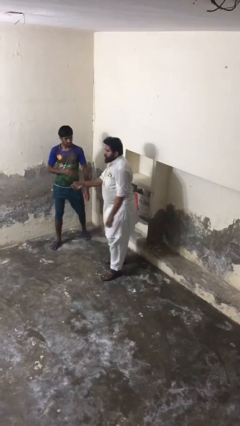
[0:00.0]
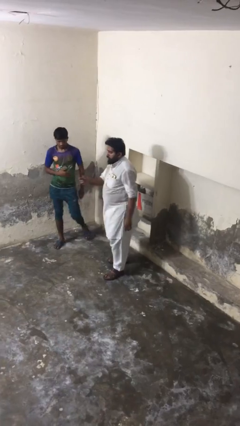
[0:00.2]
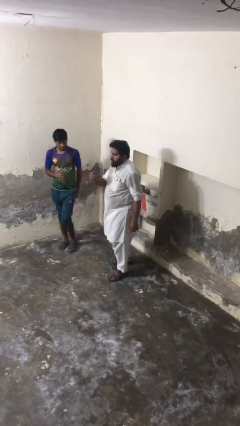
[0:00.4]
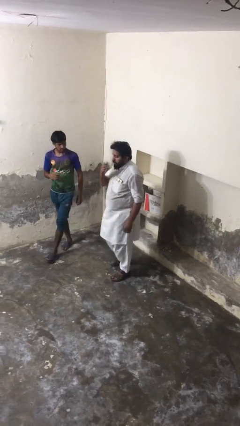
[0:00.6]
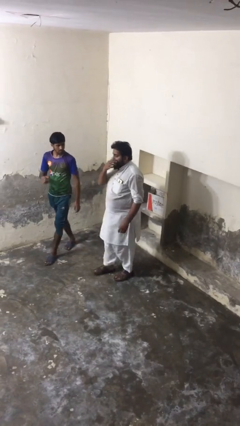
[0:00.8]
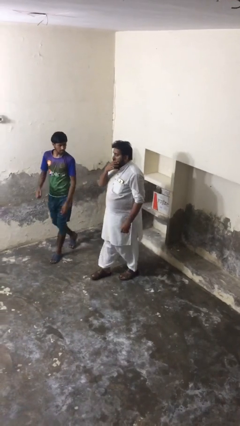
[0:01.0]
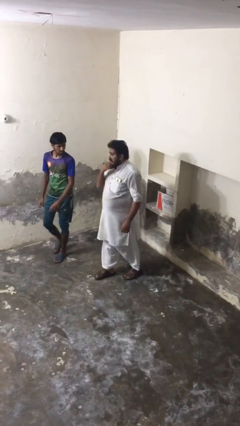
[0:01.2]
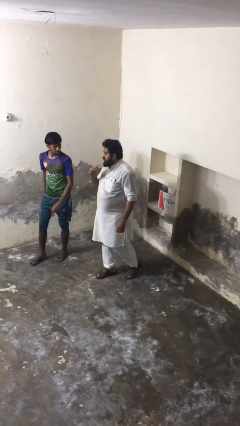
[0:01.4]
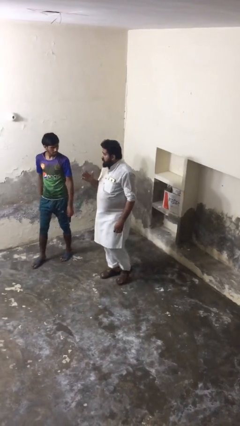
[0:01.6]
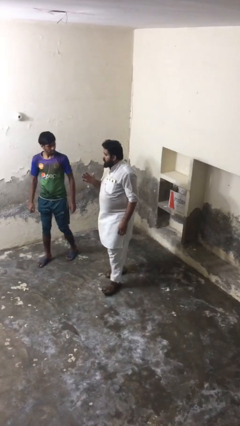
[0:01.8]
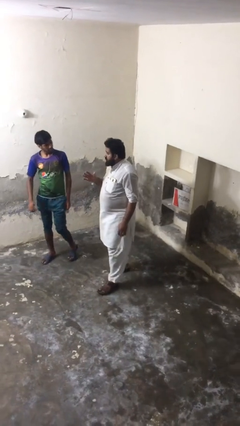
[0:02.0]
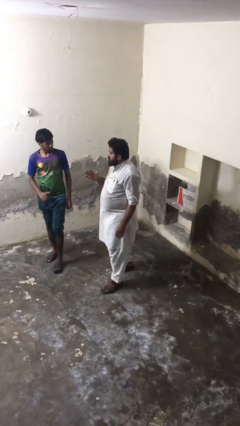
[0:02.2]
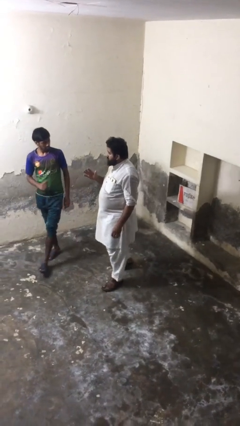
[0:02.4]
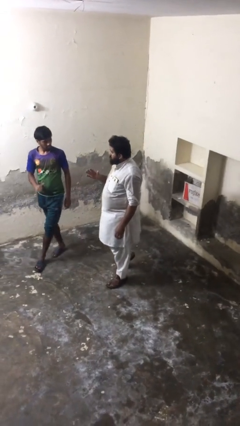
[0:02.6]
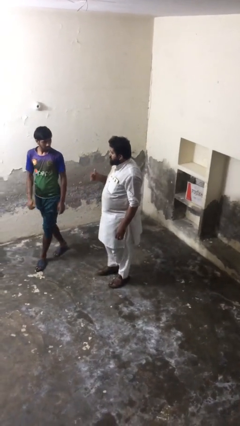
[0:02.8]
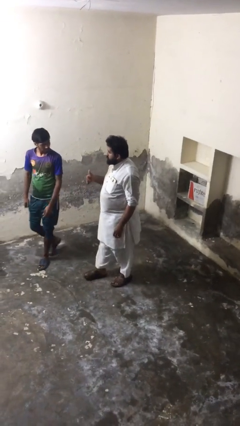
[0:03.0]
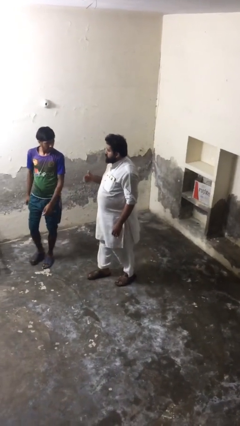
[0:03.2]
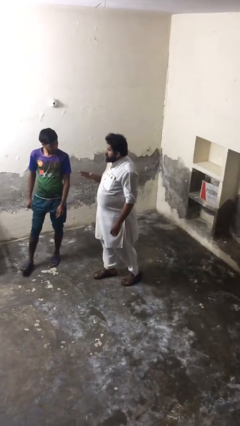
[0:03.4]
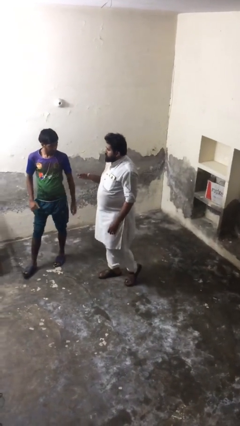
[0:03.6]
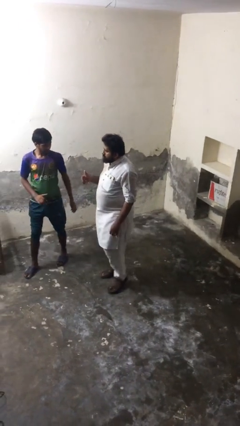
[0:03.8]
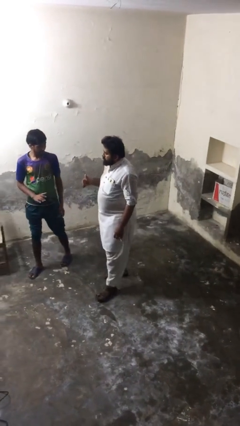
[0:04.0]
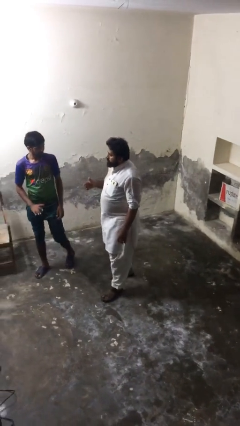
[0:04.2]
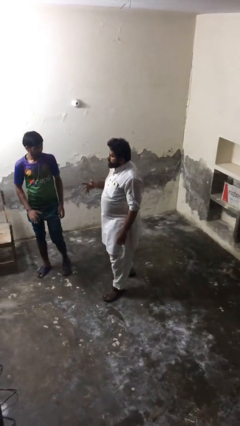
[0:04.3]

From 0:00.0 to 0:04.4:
person talks to person

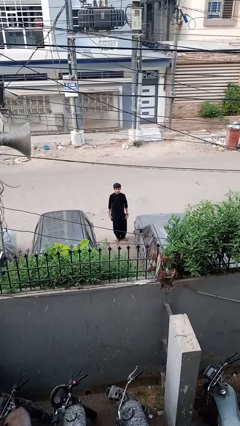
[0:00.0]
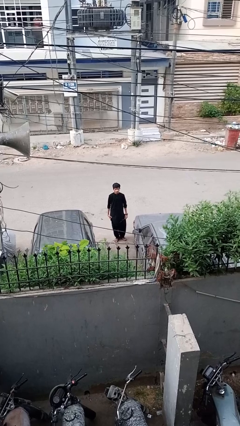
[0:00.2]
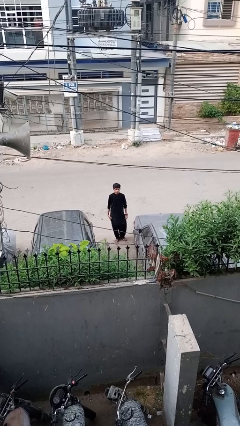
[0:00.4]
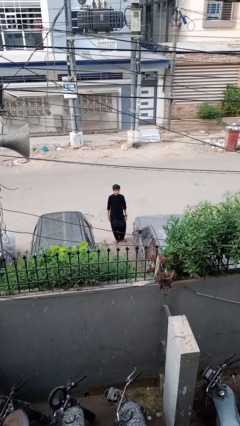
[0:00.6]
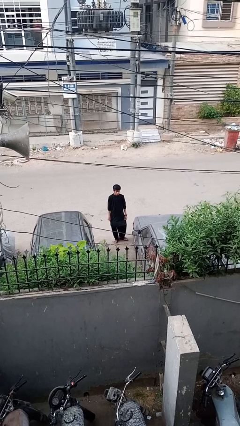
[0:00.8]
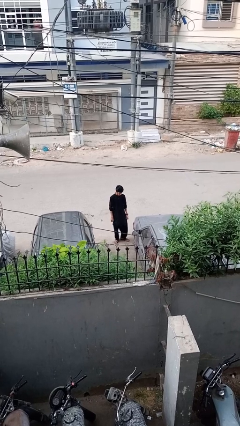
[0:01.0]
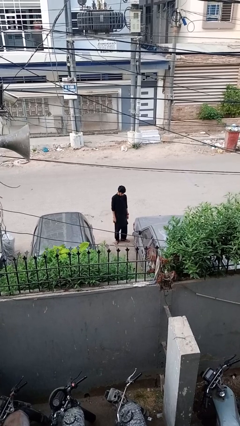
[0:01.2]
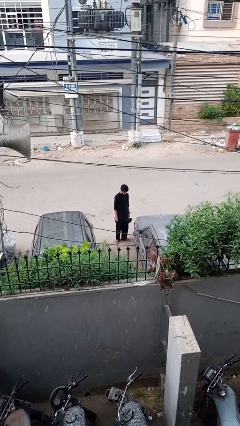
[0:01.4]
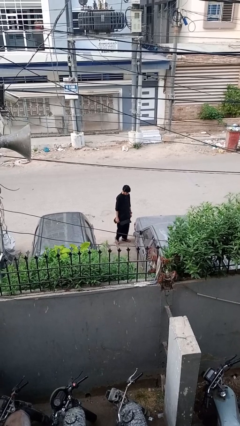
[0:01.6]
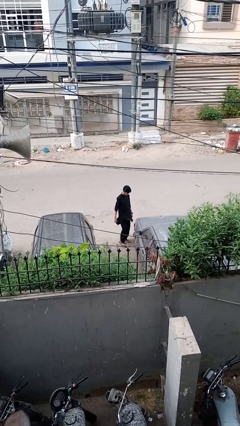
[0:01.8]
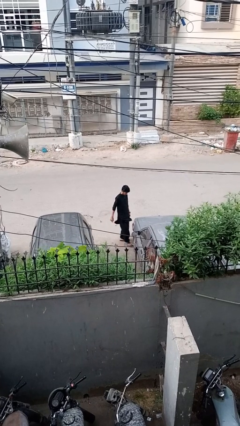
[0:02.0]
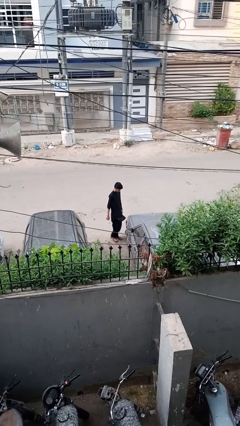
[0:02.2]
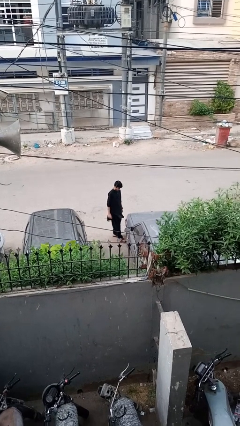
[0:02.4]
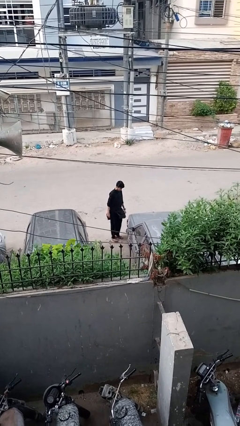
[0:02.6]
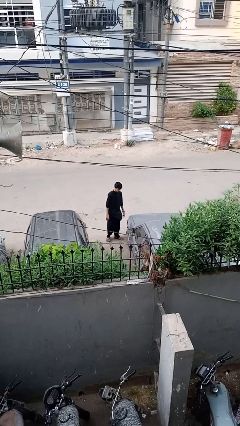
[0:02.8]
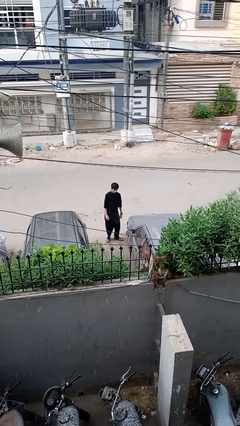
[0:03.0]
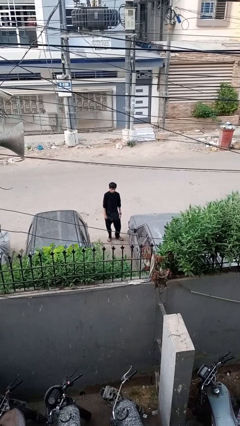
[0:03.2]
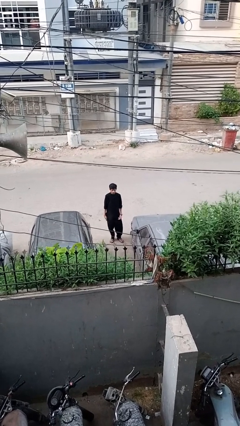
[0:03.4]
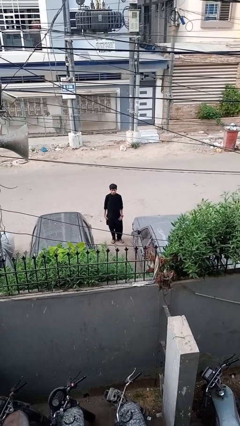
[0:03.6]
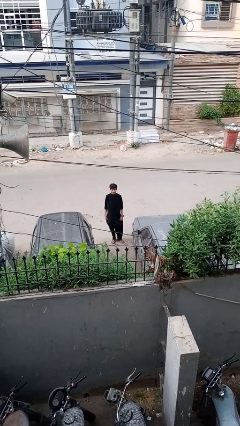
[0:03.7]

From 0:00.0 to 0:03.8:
person kicks car tires

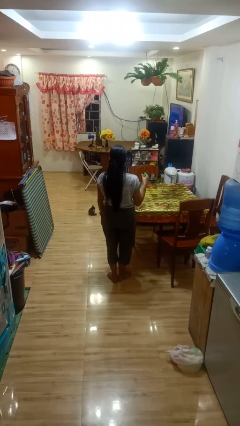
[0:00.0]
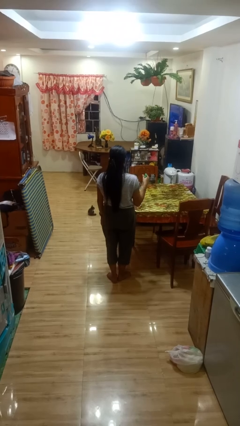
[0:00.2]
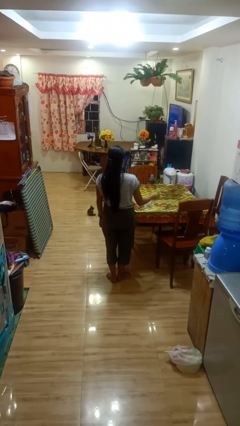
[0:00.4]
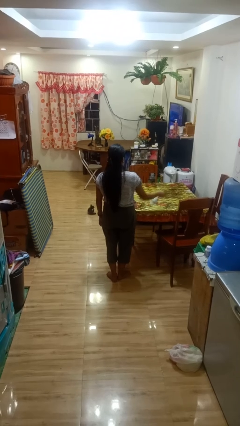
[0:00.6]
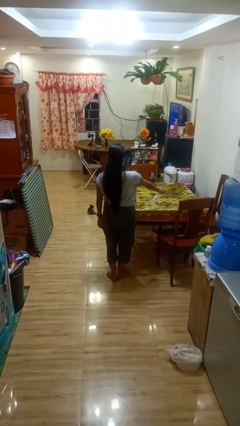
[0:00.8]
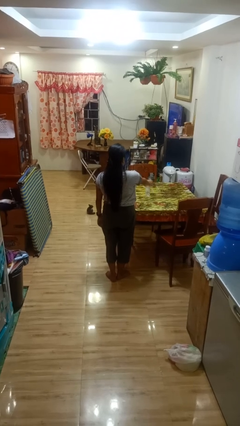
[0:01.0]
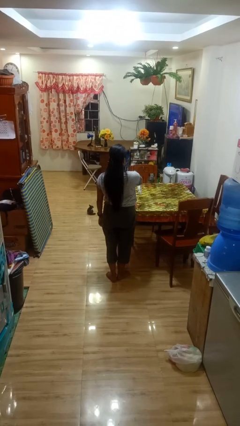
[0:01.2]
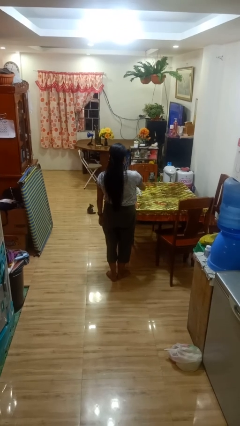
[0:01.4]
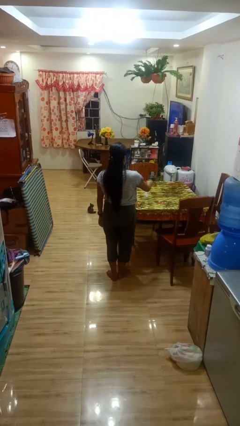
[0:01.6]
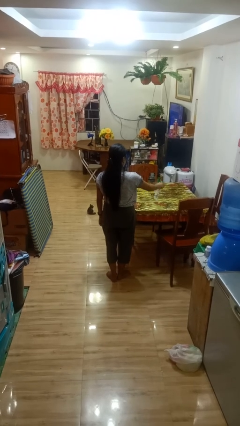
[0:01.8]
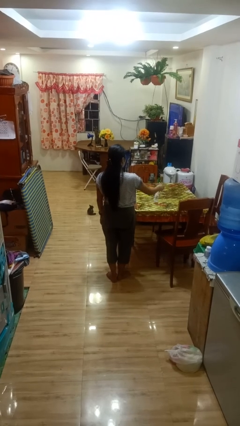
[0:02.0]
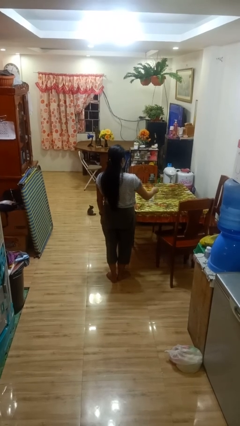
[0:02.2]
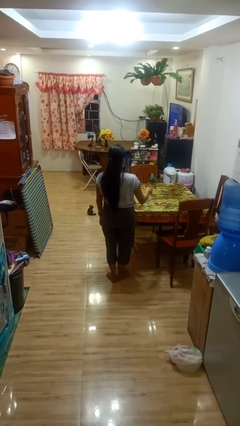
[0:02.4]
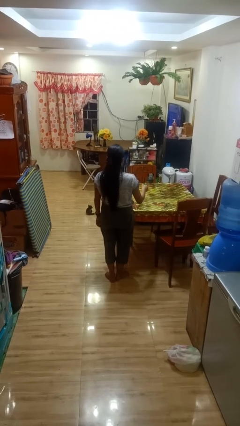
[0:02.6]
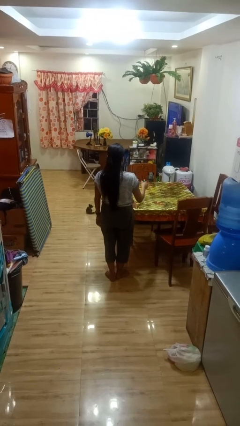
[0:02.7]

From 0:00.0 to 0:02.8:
person sprays from bottle

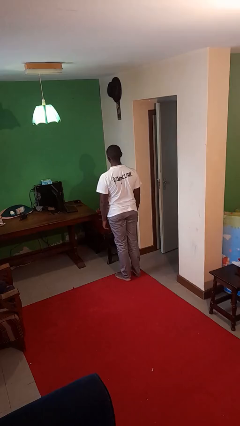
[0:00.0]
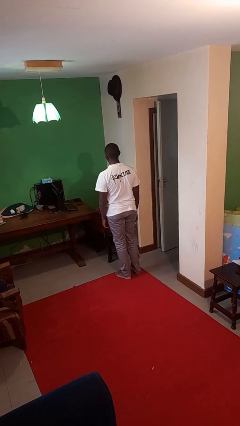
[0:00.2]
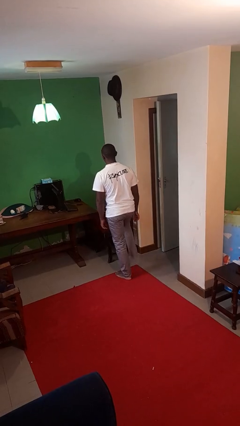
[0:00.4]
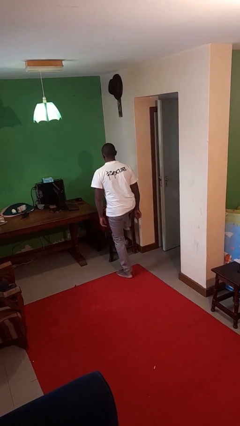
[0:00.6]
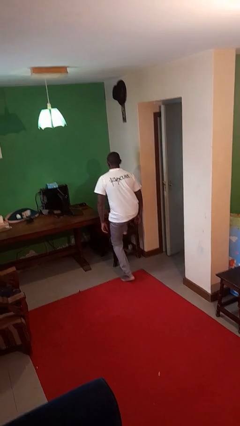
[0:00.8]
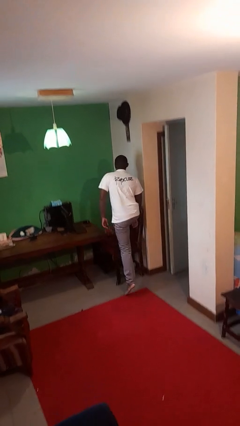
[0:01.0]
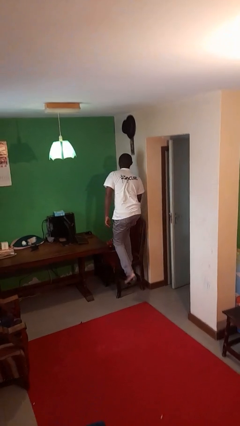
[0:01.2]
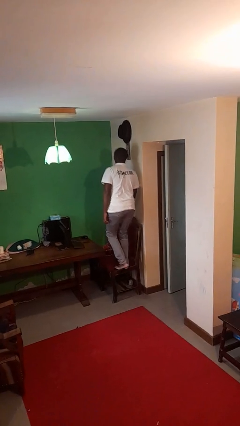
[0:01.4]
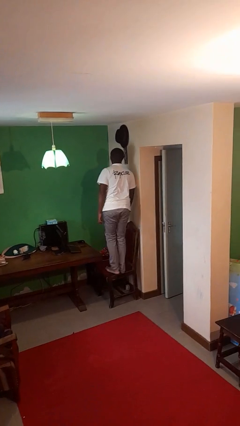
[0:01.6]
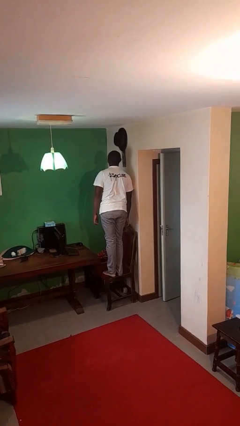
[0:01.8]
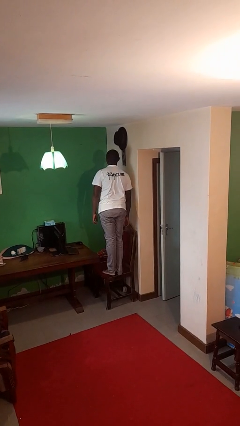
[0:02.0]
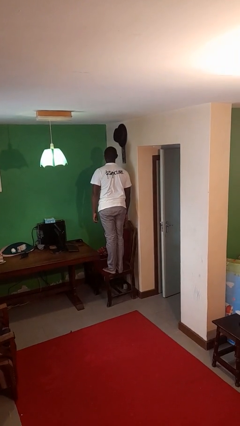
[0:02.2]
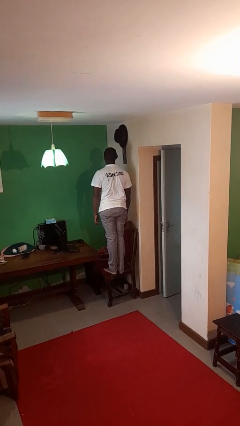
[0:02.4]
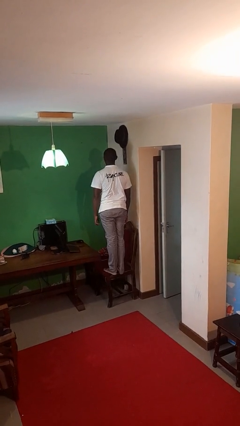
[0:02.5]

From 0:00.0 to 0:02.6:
person climbs on chair

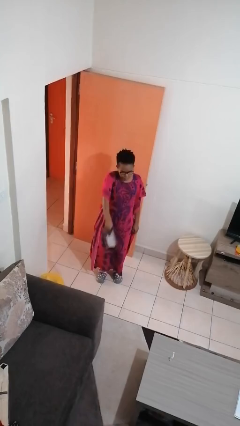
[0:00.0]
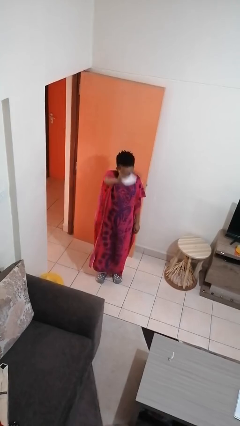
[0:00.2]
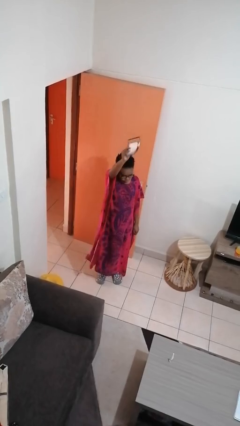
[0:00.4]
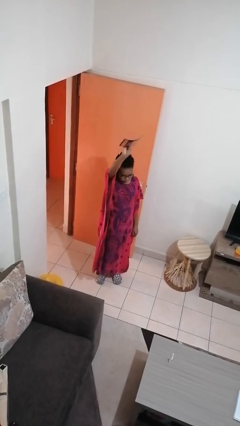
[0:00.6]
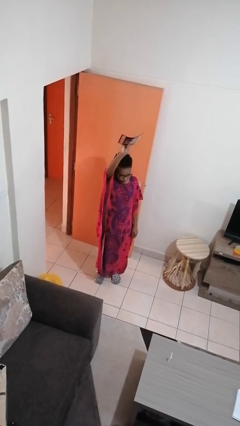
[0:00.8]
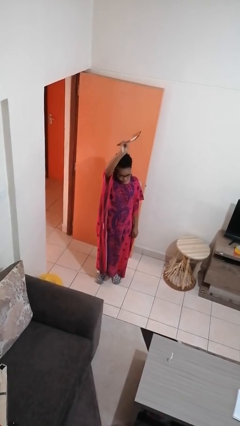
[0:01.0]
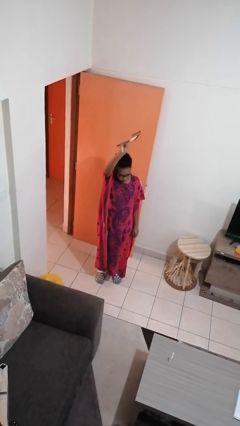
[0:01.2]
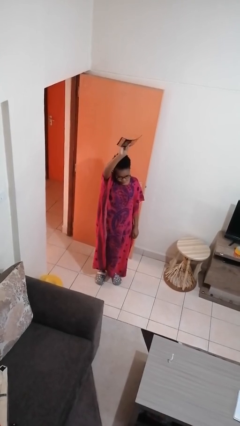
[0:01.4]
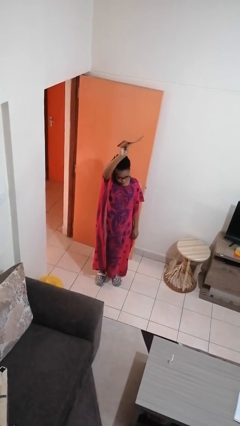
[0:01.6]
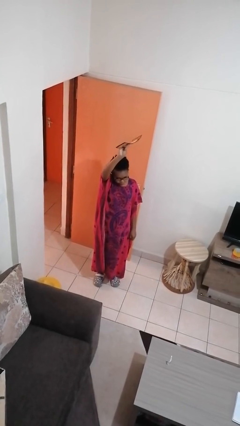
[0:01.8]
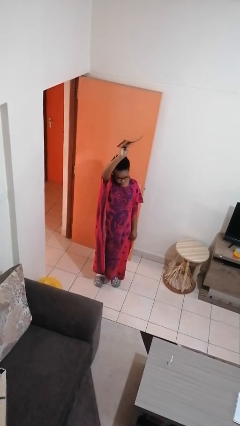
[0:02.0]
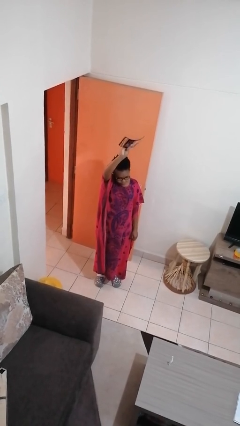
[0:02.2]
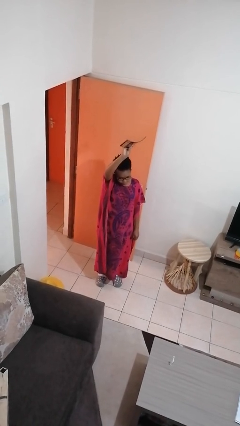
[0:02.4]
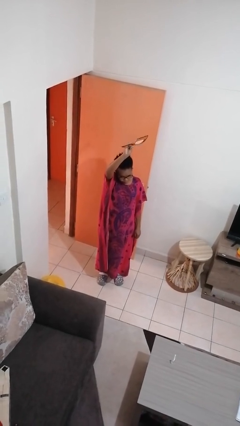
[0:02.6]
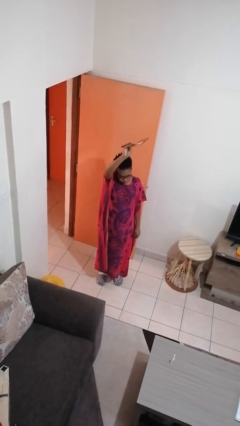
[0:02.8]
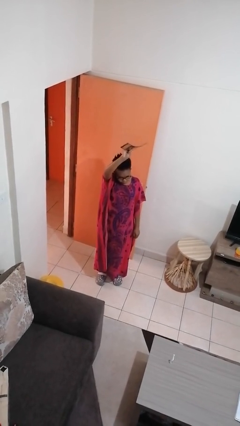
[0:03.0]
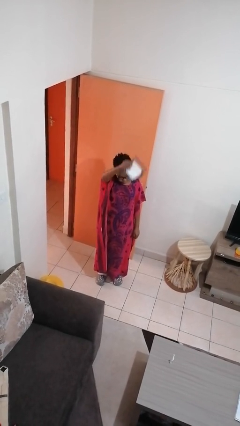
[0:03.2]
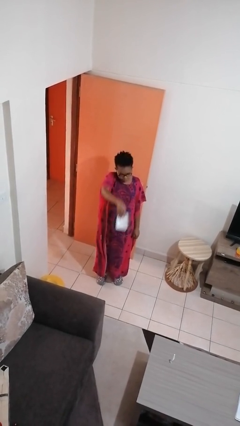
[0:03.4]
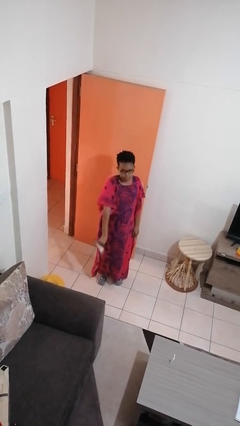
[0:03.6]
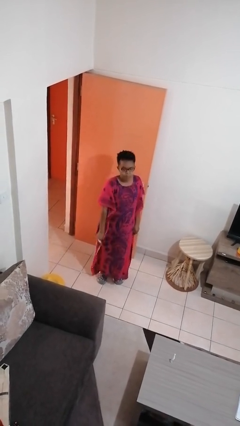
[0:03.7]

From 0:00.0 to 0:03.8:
person holds object above head

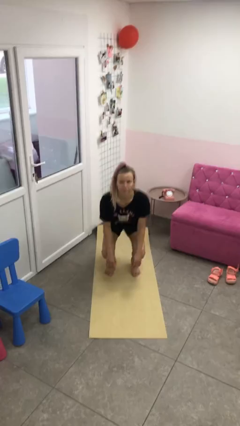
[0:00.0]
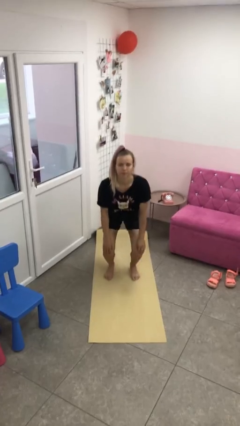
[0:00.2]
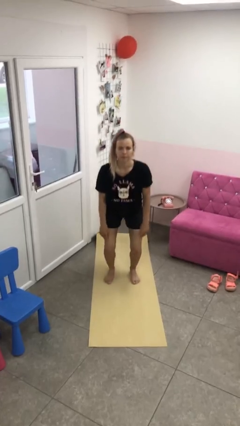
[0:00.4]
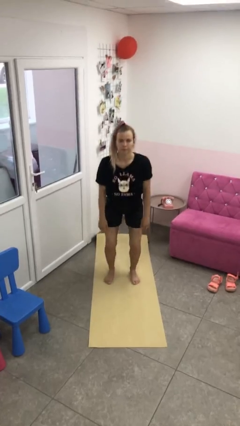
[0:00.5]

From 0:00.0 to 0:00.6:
person stands up
